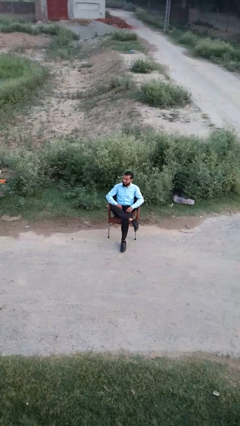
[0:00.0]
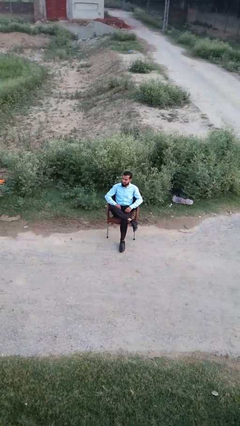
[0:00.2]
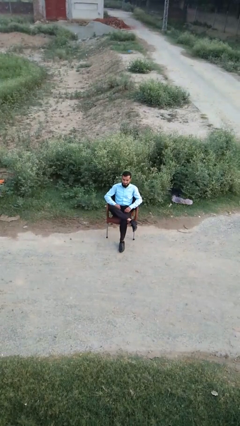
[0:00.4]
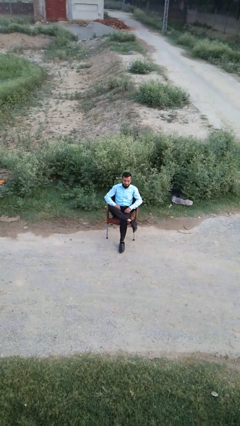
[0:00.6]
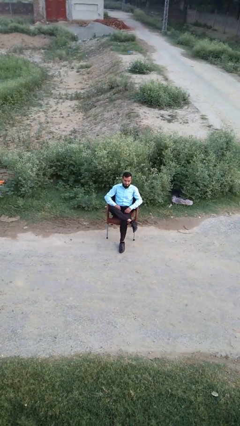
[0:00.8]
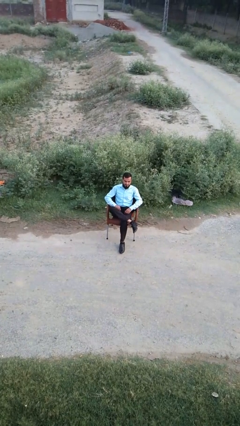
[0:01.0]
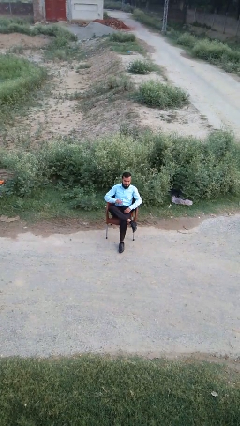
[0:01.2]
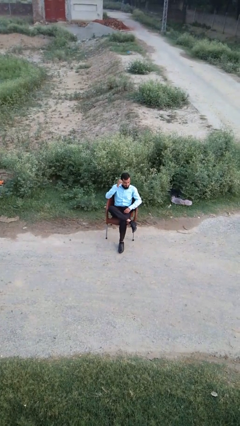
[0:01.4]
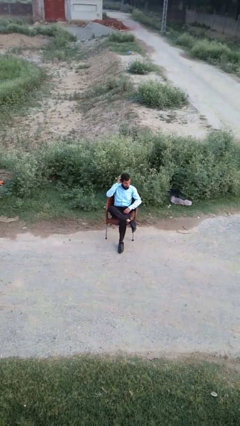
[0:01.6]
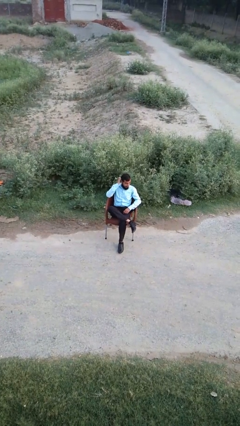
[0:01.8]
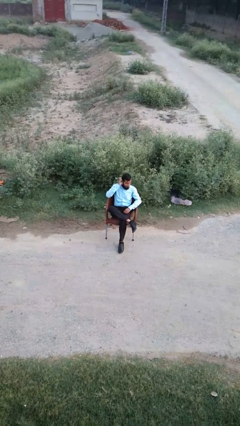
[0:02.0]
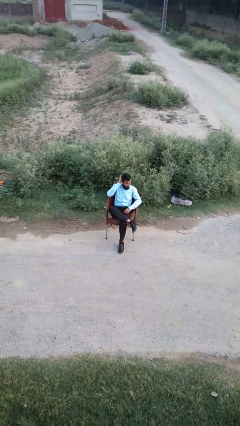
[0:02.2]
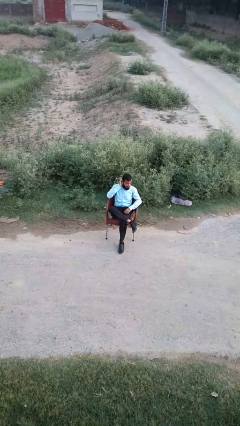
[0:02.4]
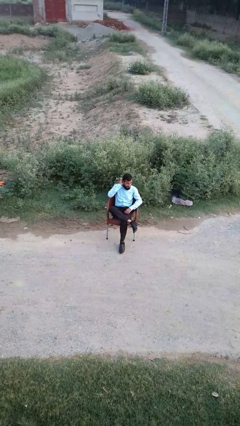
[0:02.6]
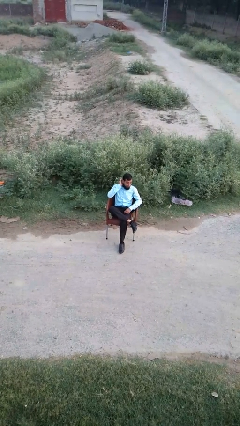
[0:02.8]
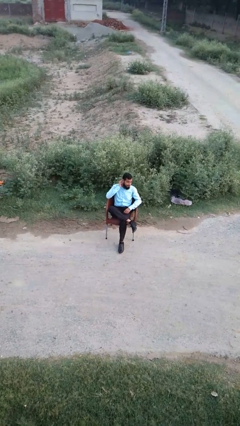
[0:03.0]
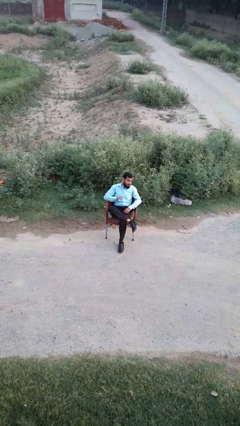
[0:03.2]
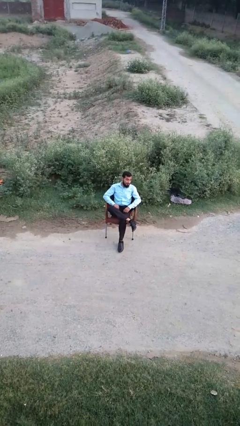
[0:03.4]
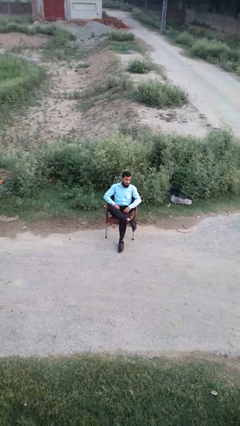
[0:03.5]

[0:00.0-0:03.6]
person scratches face

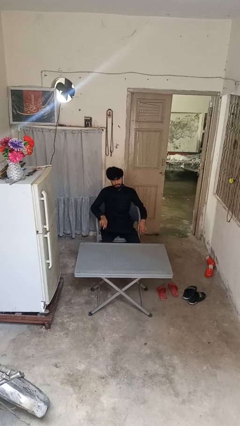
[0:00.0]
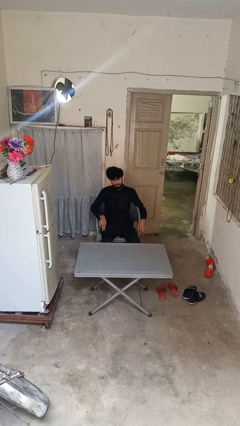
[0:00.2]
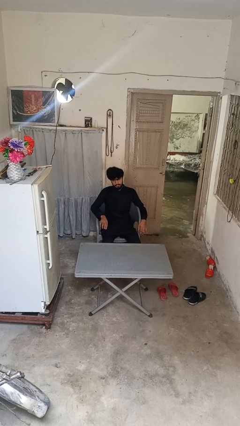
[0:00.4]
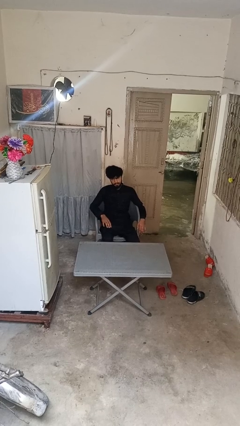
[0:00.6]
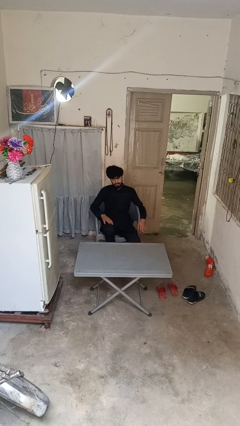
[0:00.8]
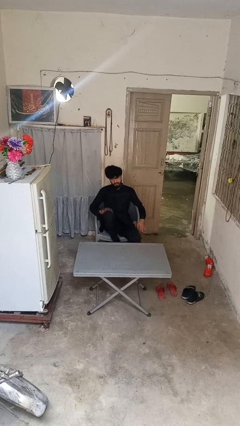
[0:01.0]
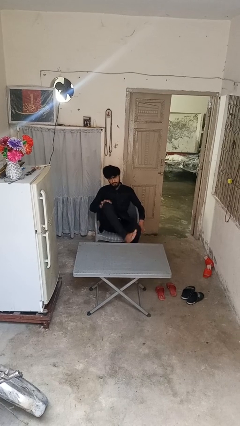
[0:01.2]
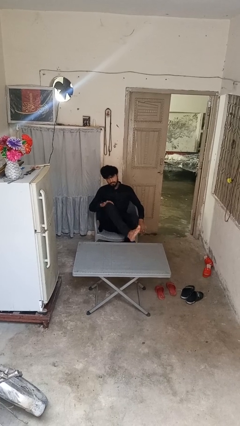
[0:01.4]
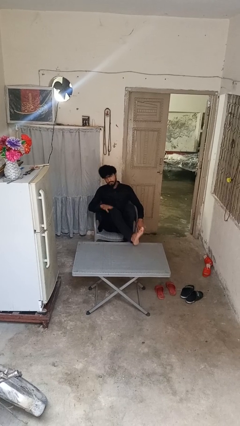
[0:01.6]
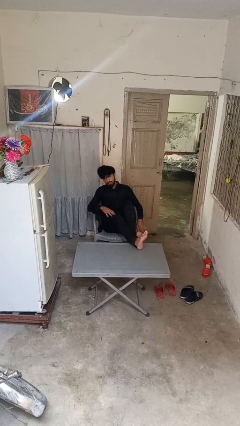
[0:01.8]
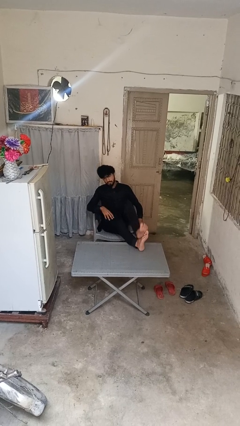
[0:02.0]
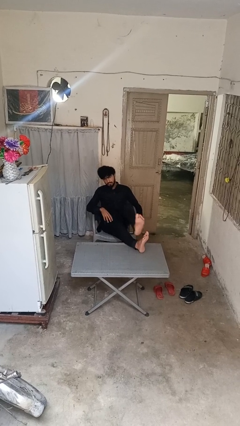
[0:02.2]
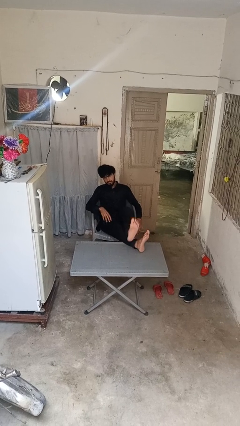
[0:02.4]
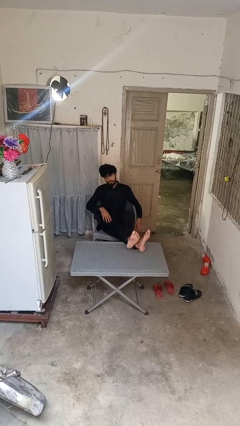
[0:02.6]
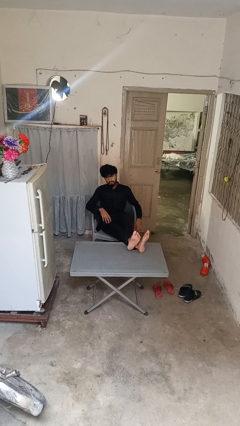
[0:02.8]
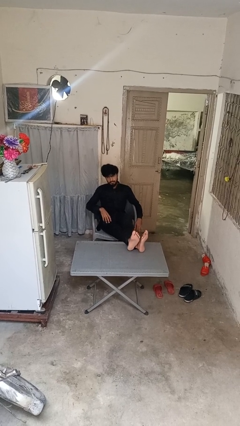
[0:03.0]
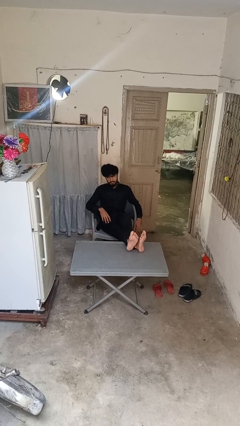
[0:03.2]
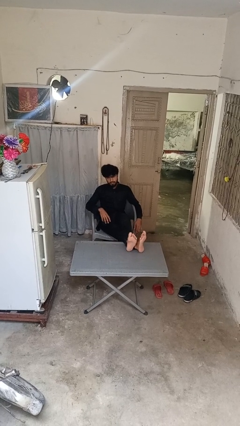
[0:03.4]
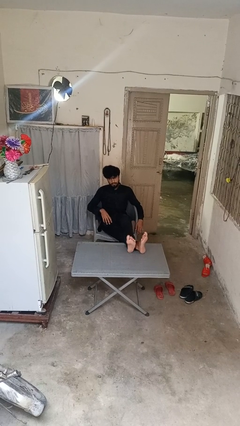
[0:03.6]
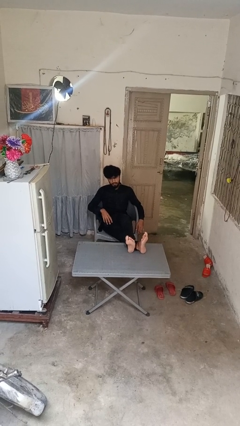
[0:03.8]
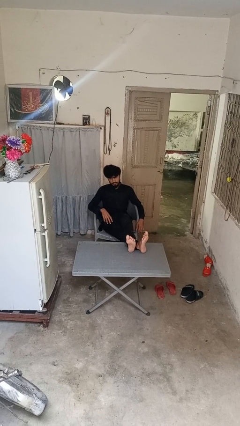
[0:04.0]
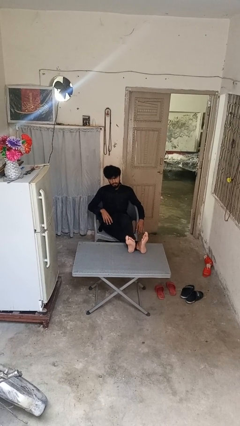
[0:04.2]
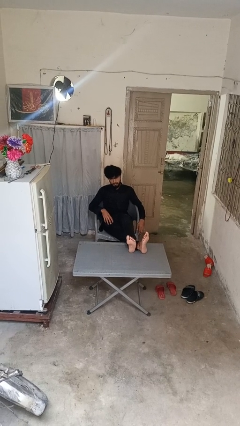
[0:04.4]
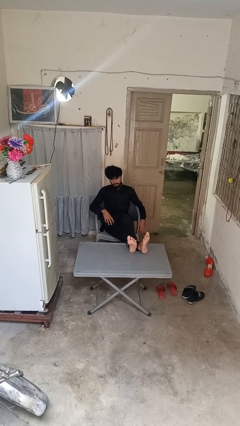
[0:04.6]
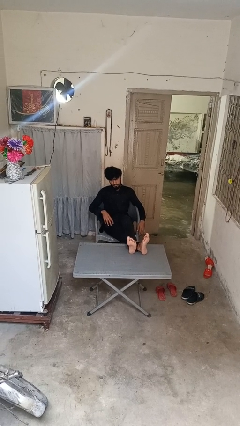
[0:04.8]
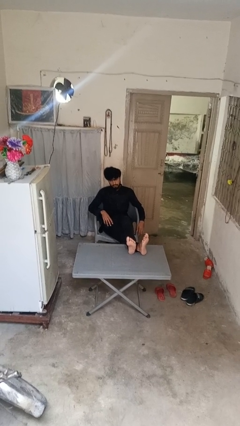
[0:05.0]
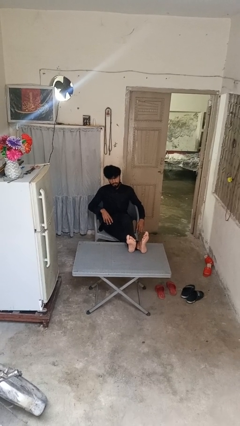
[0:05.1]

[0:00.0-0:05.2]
person puts feet up

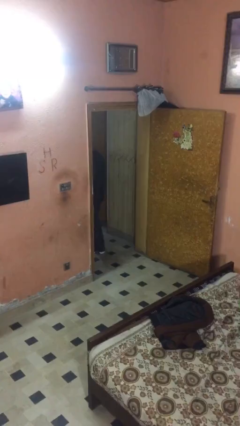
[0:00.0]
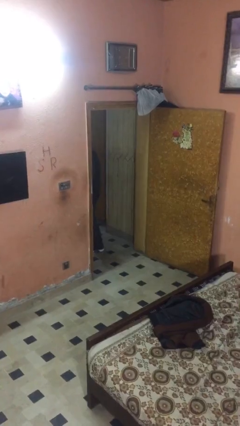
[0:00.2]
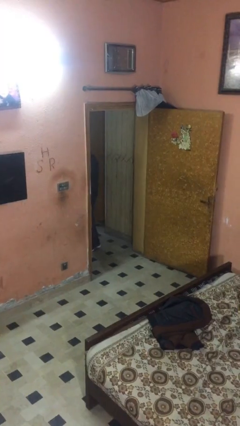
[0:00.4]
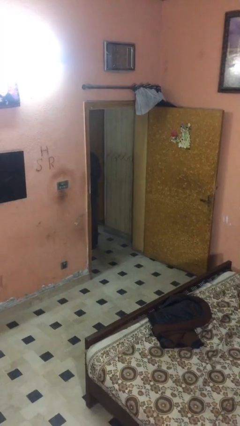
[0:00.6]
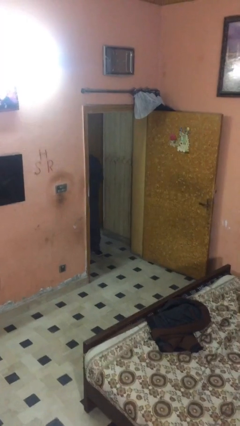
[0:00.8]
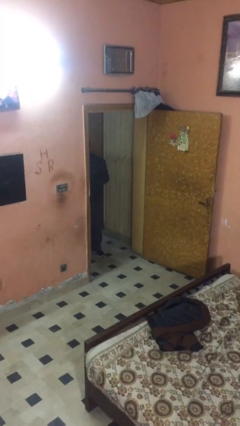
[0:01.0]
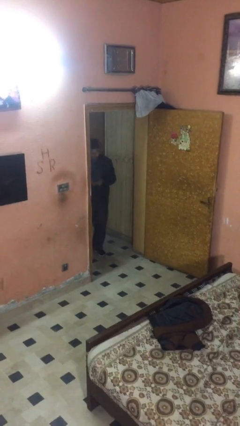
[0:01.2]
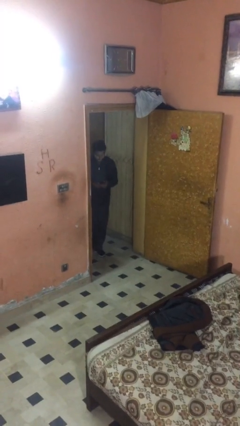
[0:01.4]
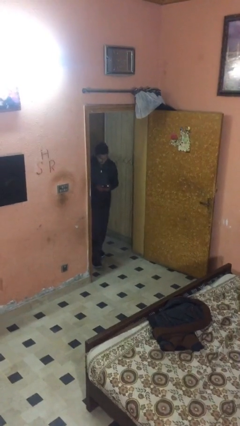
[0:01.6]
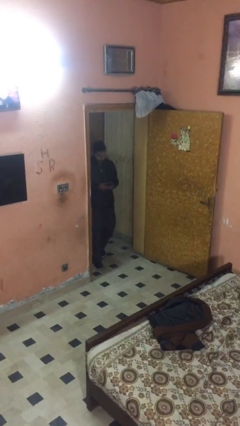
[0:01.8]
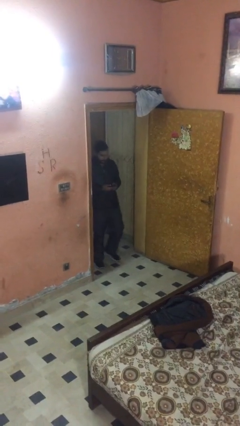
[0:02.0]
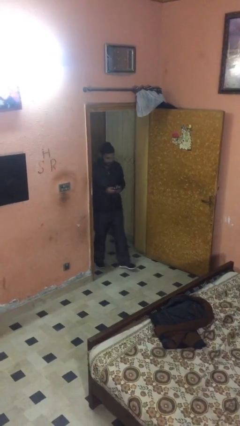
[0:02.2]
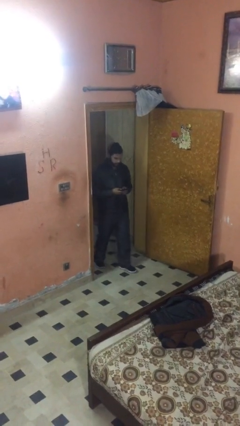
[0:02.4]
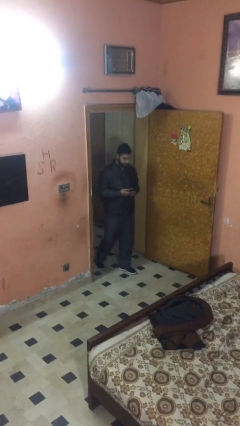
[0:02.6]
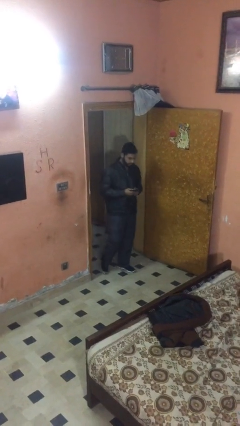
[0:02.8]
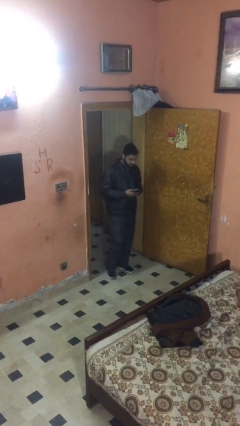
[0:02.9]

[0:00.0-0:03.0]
person enters scene through structure

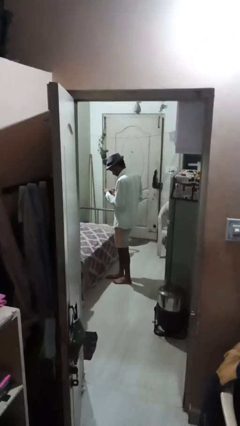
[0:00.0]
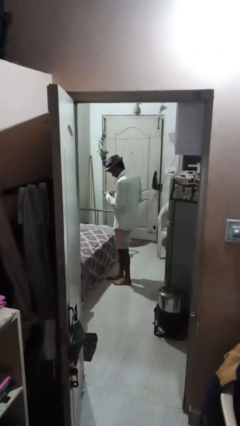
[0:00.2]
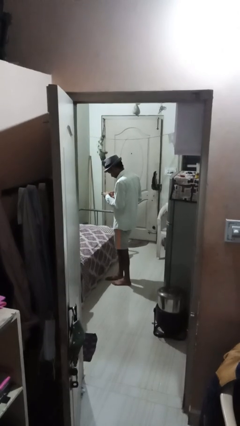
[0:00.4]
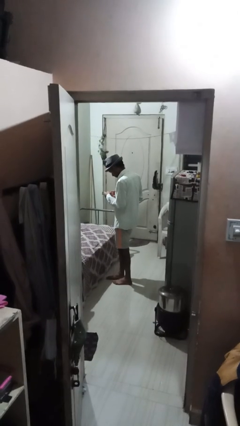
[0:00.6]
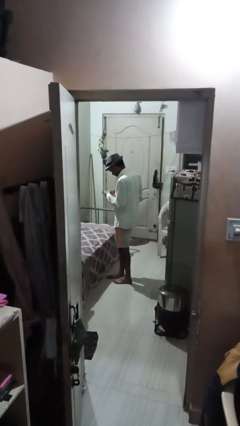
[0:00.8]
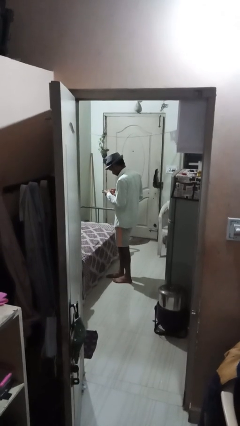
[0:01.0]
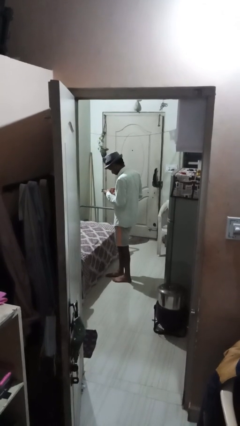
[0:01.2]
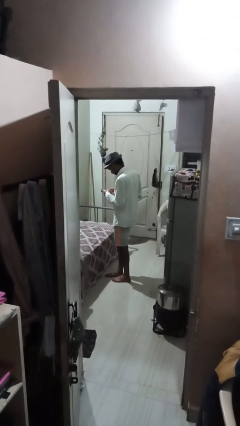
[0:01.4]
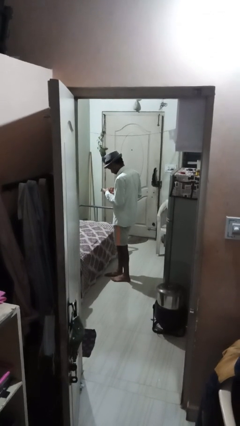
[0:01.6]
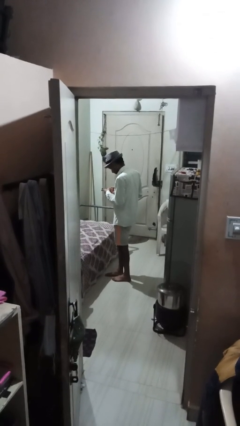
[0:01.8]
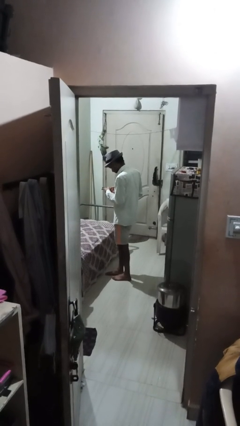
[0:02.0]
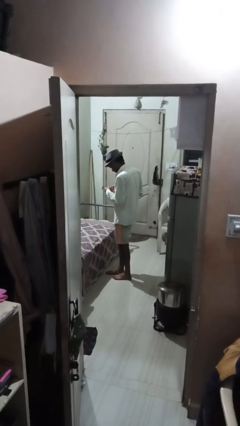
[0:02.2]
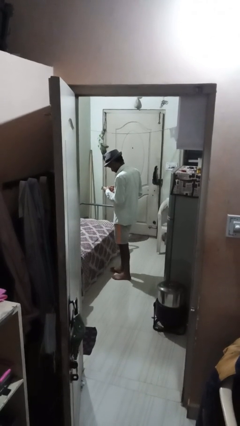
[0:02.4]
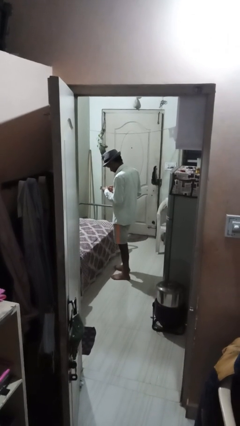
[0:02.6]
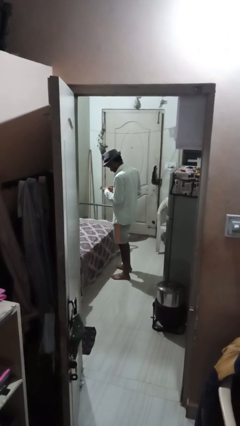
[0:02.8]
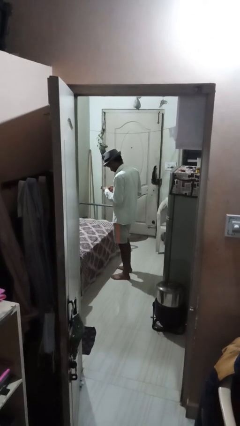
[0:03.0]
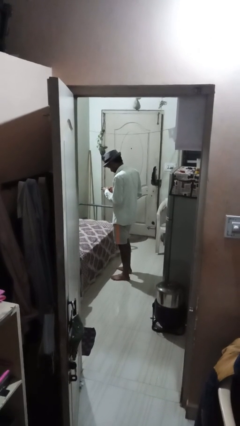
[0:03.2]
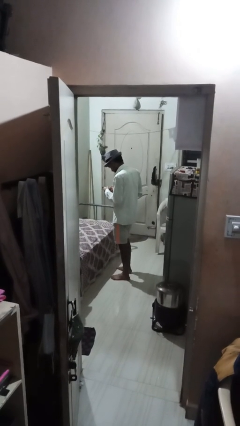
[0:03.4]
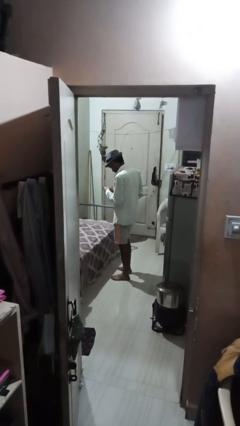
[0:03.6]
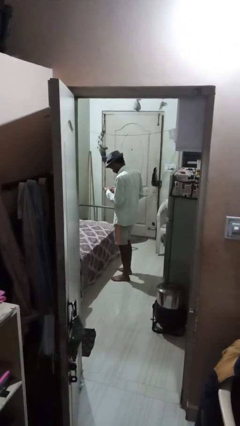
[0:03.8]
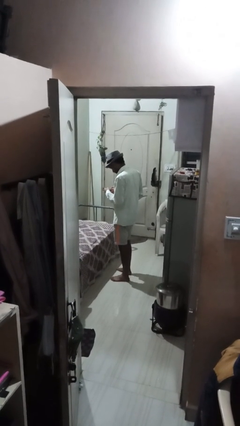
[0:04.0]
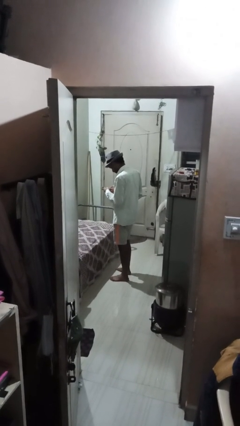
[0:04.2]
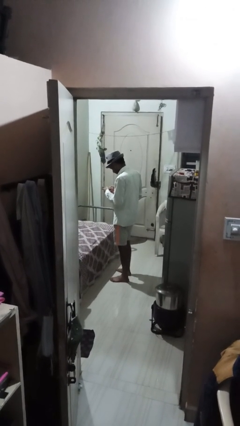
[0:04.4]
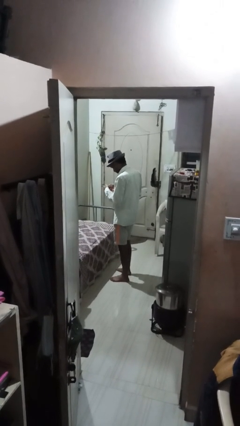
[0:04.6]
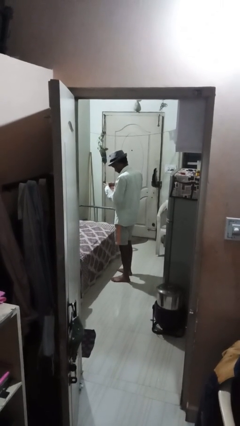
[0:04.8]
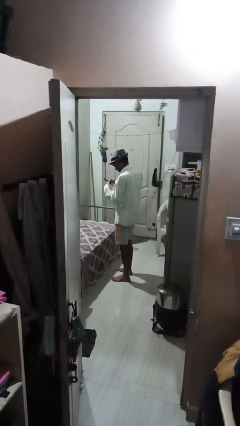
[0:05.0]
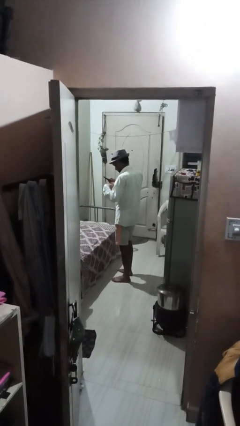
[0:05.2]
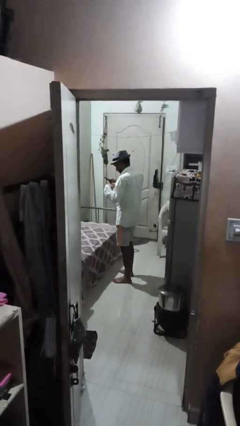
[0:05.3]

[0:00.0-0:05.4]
person takes phone from pocket

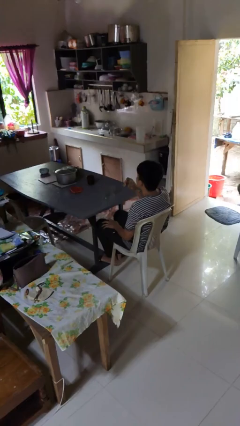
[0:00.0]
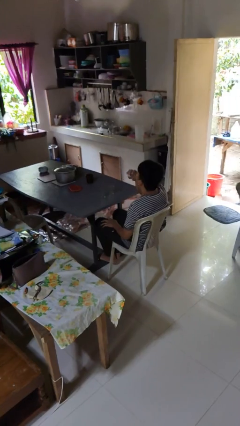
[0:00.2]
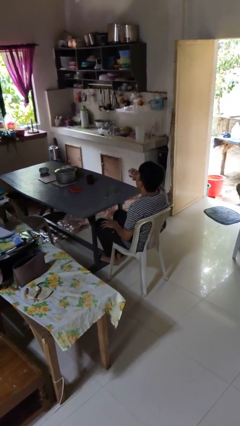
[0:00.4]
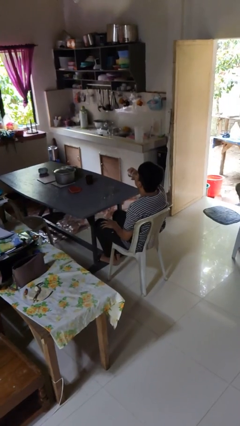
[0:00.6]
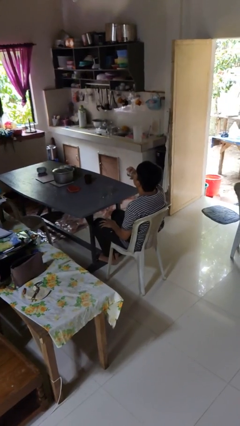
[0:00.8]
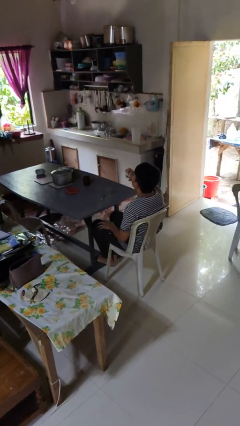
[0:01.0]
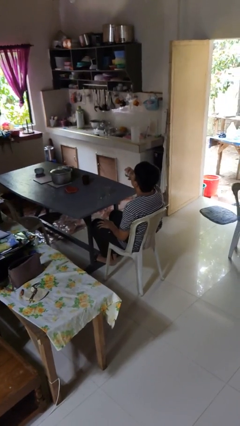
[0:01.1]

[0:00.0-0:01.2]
person drinks from shotglass
